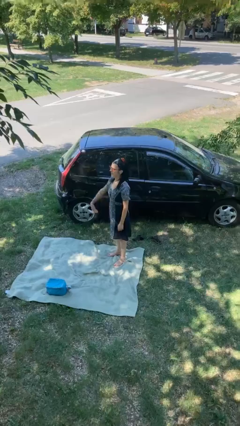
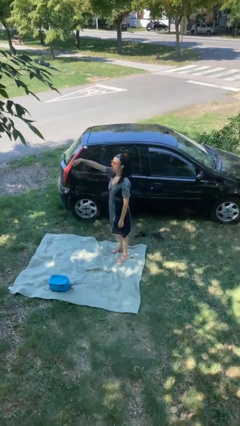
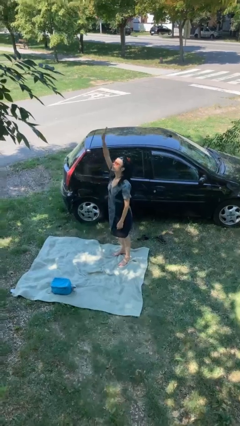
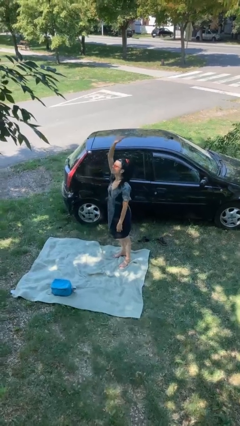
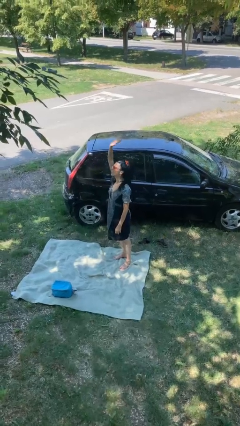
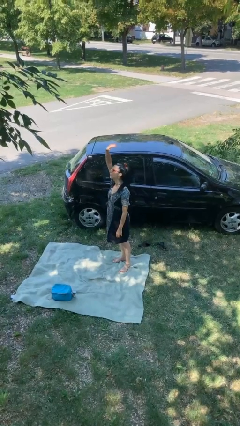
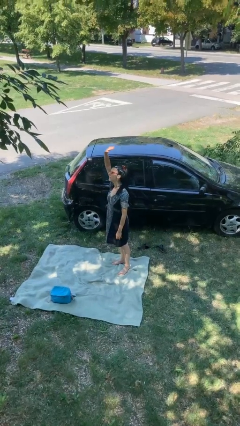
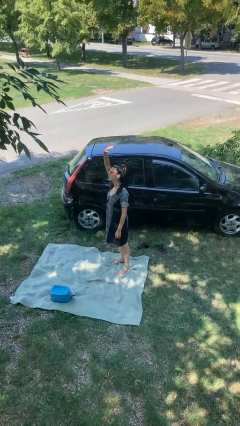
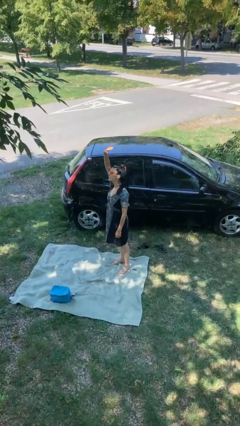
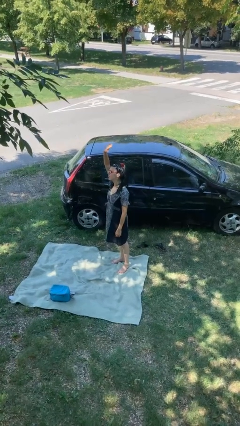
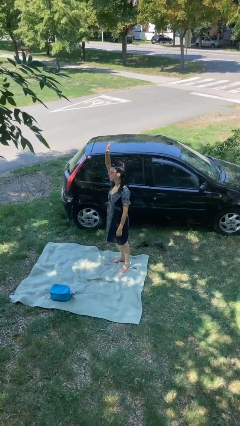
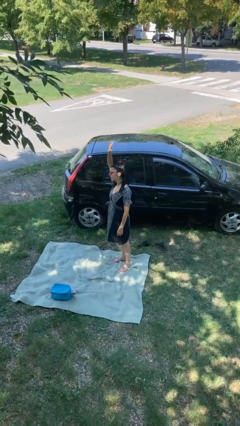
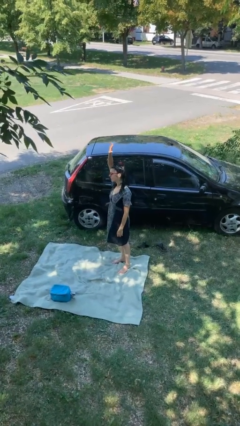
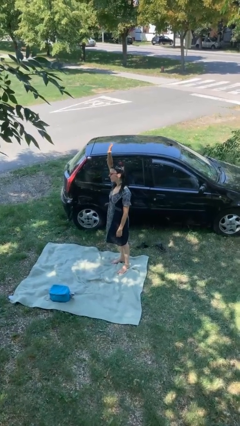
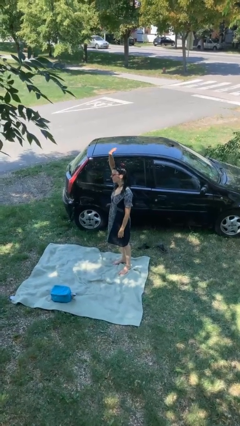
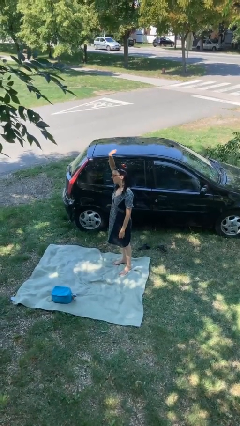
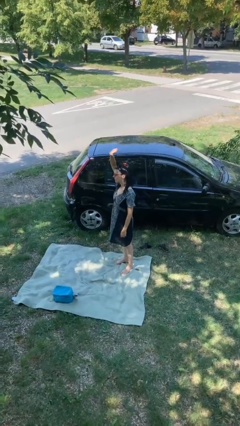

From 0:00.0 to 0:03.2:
person gestures raise hand

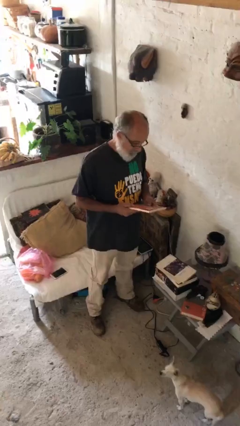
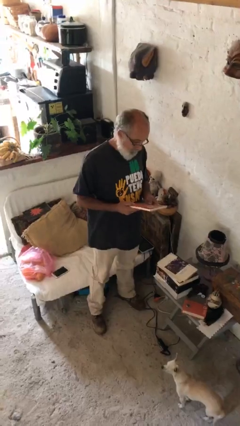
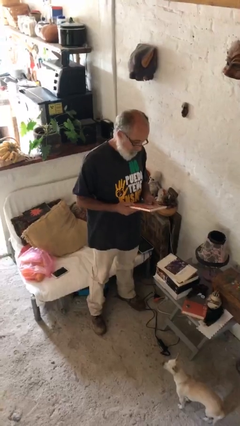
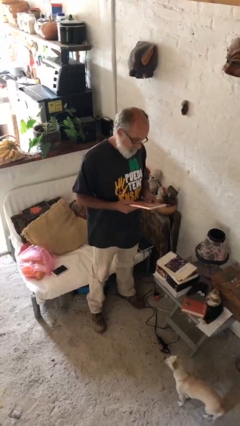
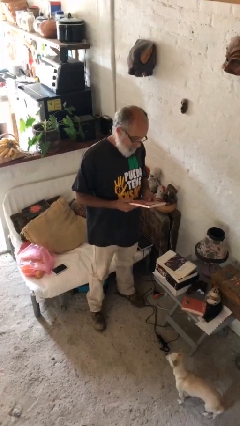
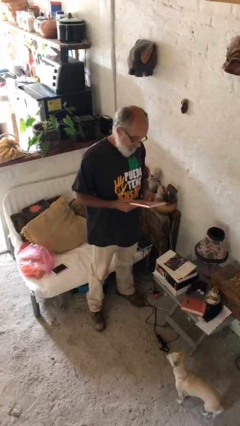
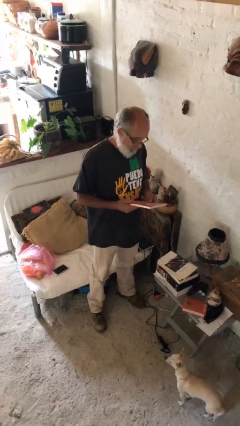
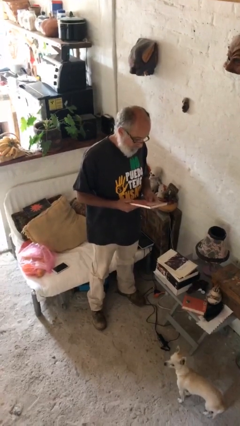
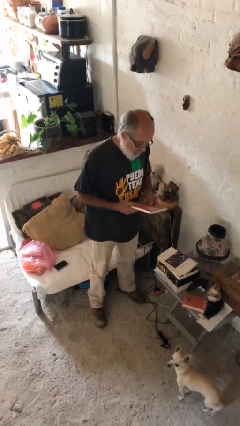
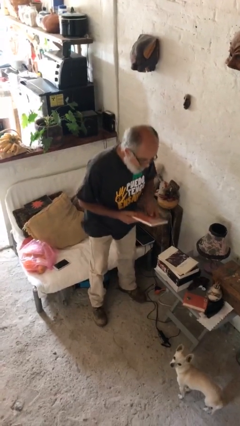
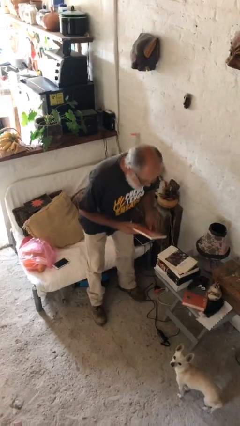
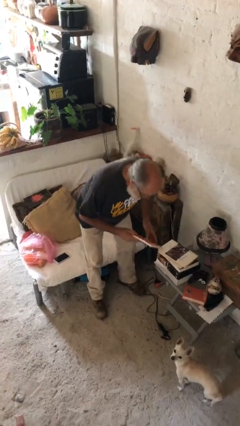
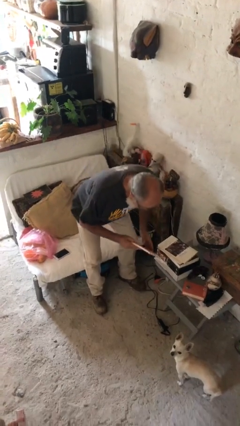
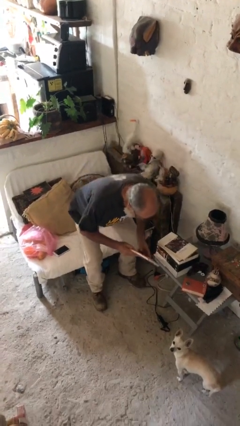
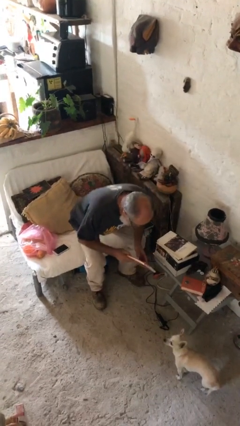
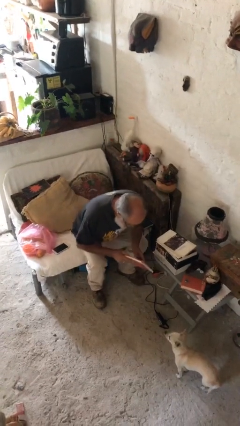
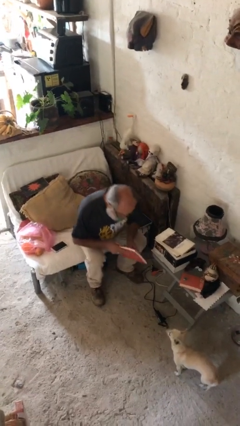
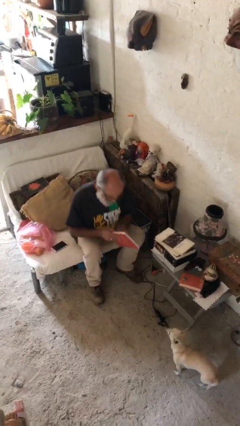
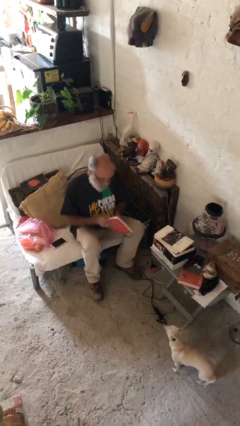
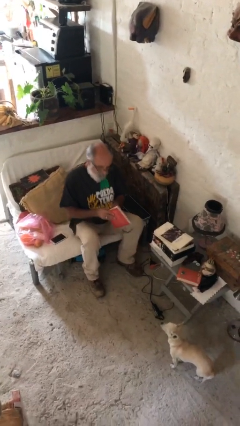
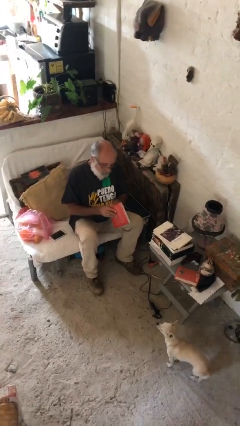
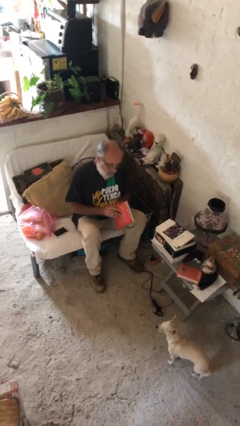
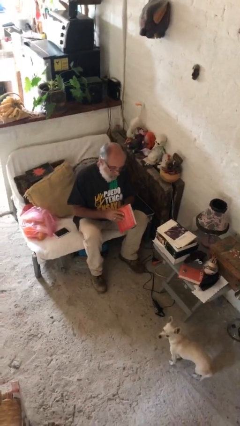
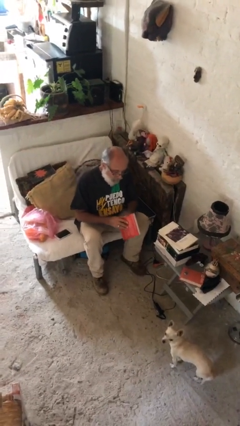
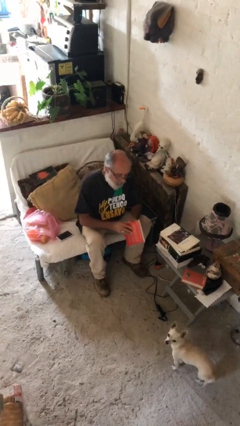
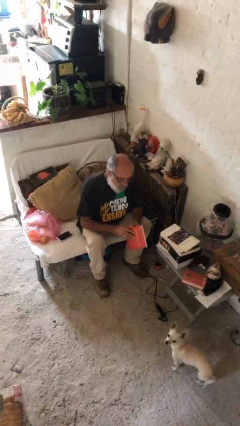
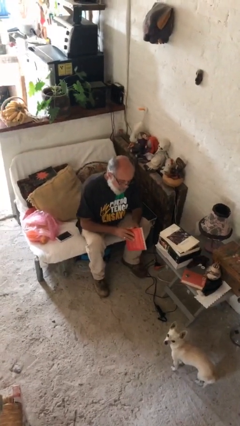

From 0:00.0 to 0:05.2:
person sits down

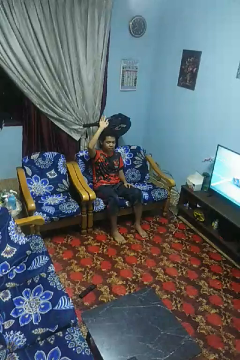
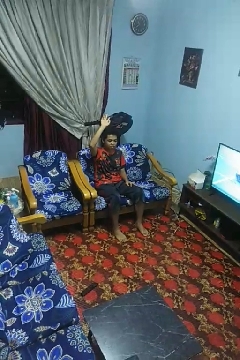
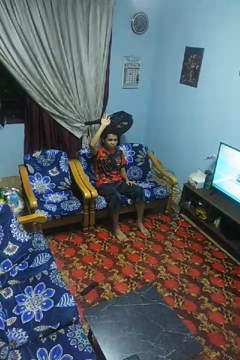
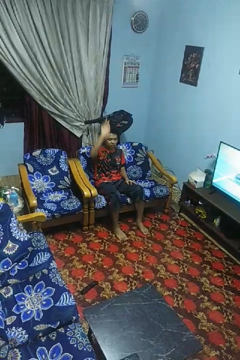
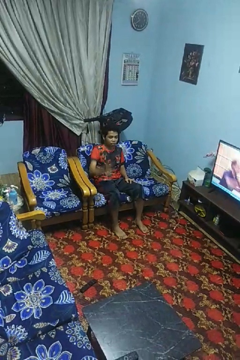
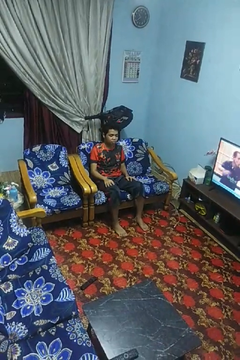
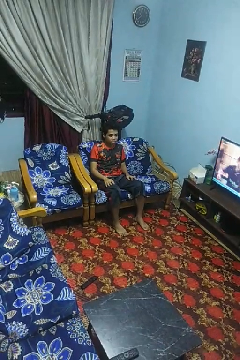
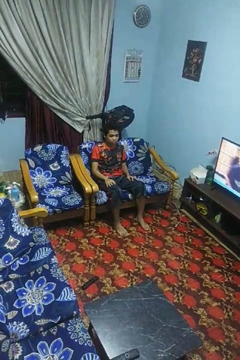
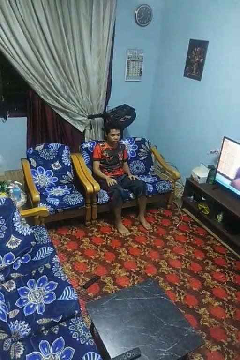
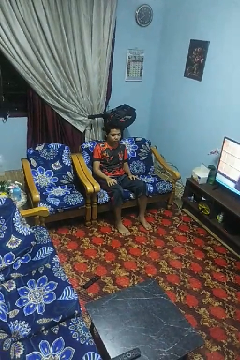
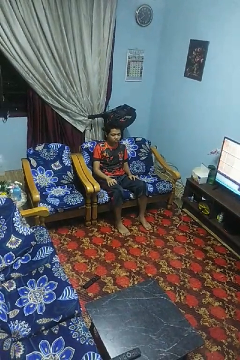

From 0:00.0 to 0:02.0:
person gestures lower hand

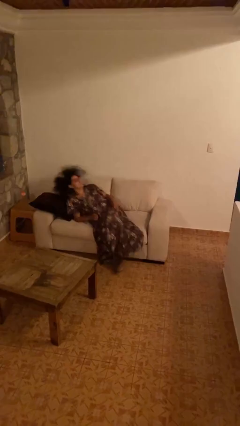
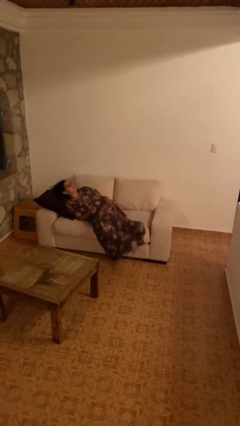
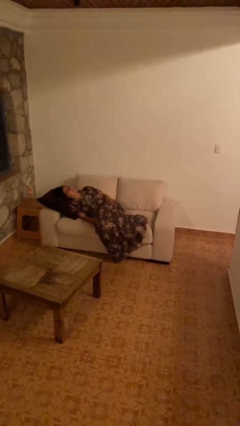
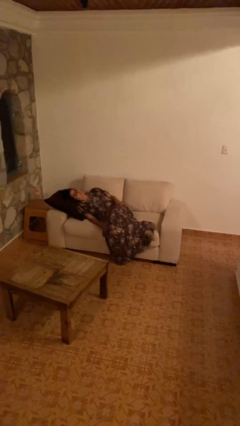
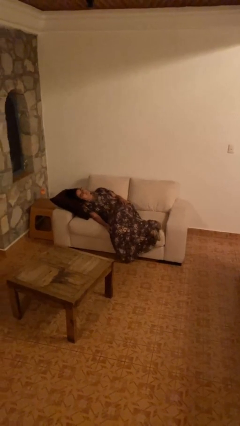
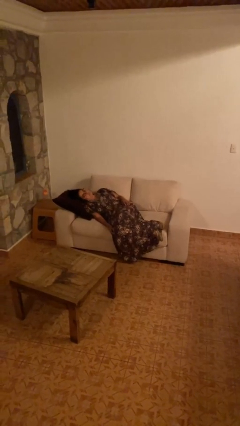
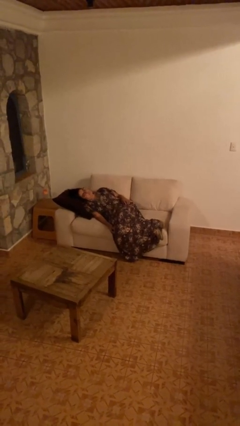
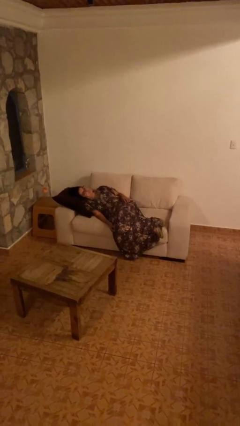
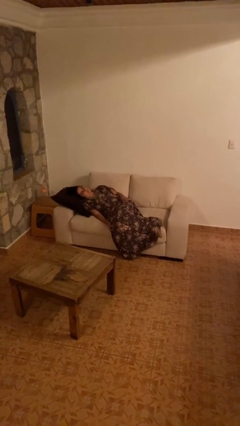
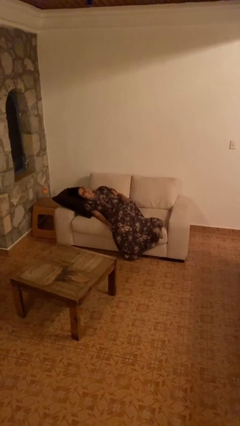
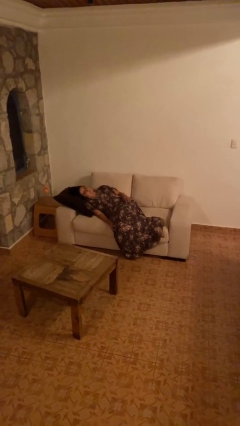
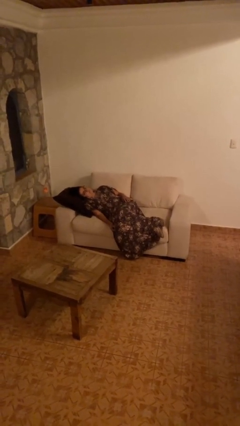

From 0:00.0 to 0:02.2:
person lies down on couch

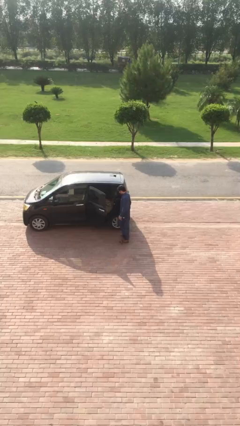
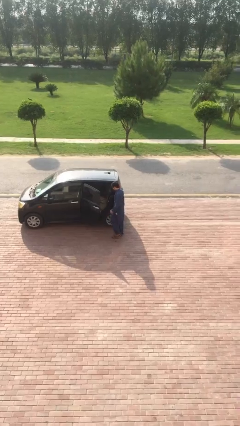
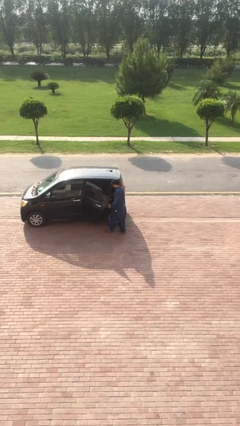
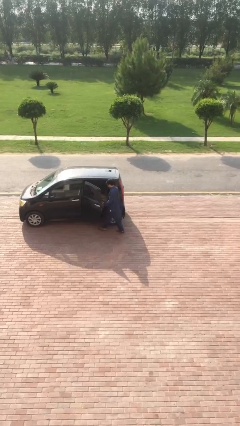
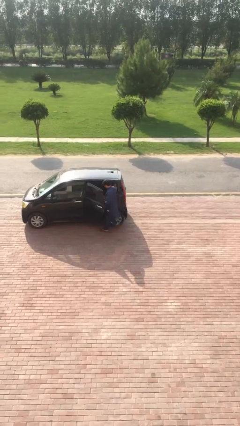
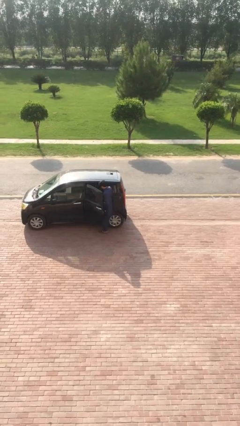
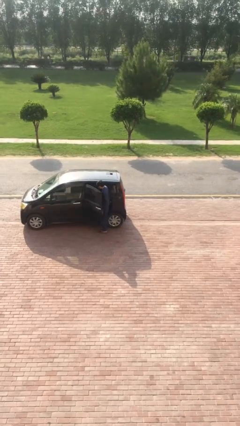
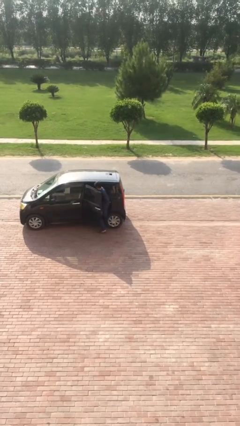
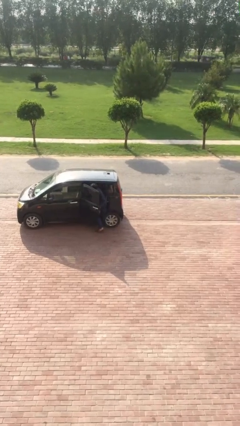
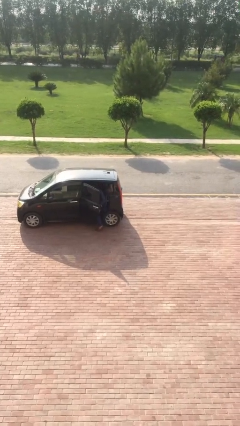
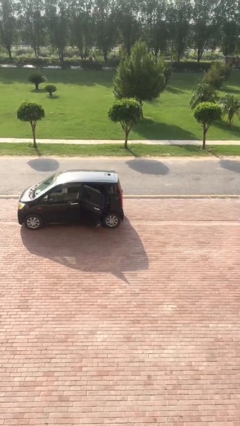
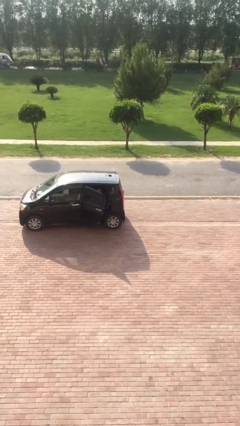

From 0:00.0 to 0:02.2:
person enters car

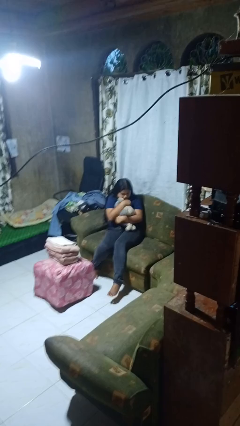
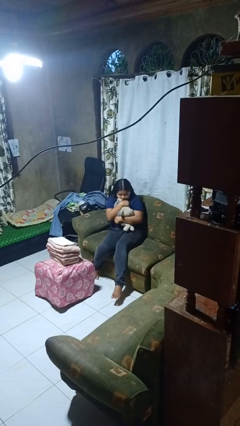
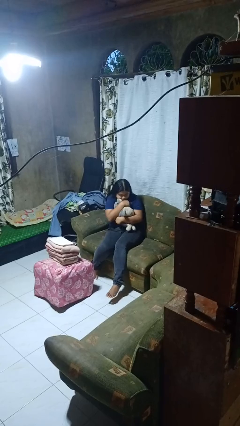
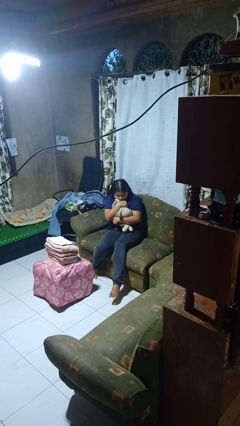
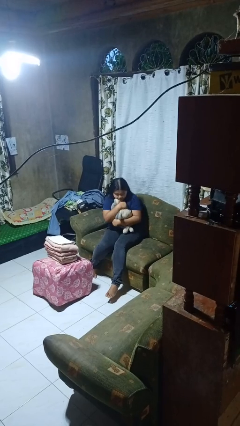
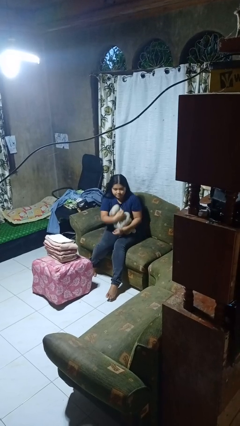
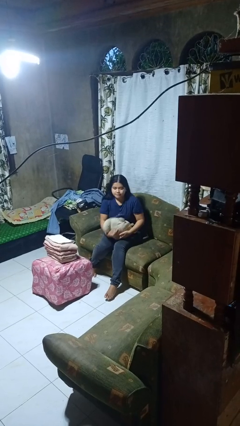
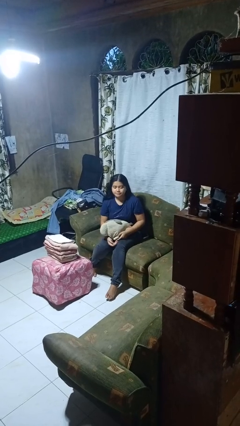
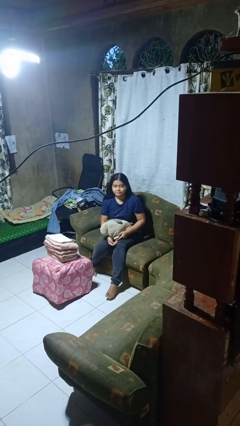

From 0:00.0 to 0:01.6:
person hugs stuffed animal

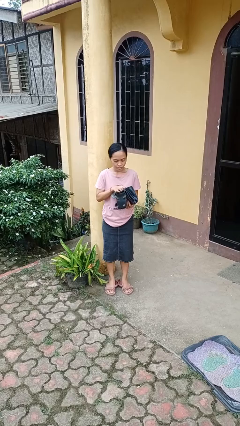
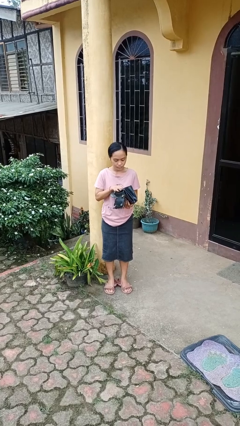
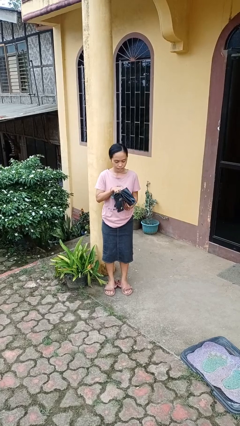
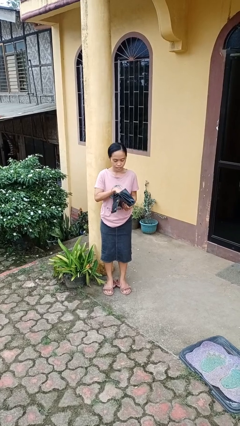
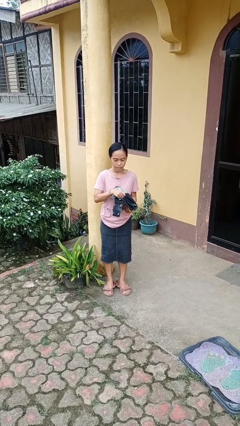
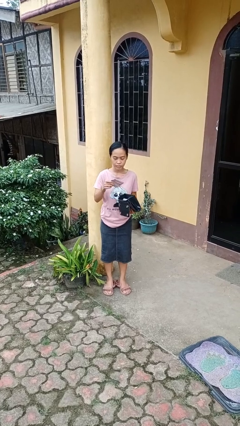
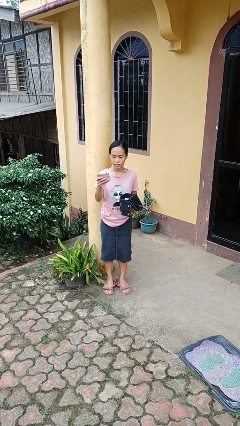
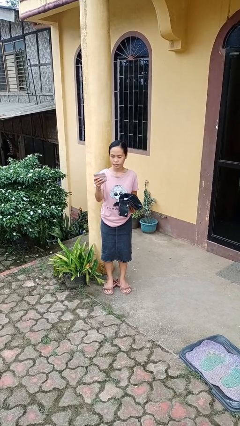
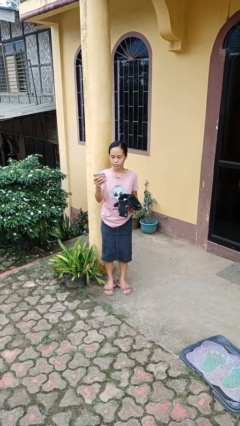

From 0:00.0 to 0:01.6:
person searches in purse
